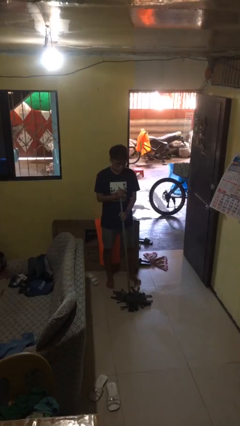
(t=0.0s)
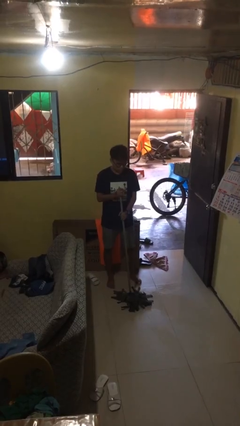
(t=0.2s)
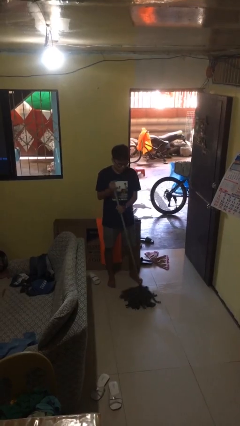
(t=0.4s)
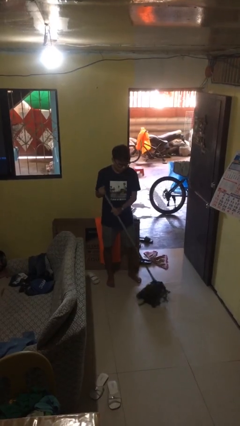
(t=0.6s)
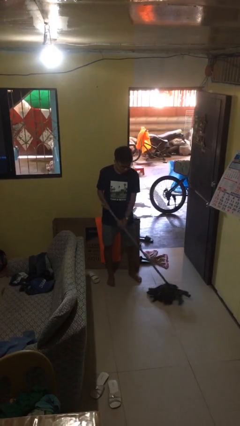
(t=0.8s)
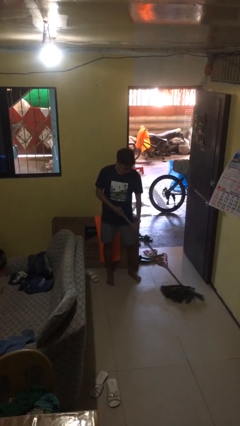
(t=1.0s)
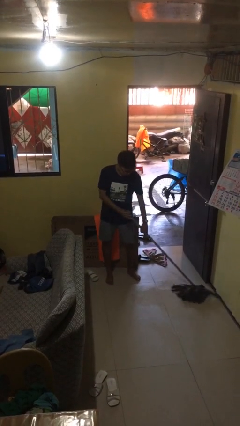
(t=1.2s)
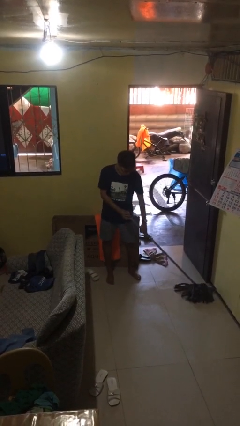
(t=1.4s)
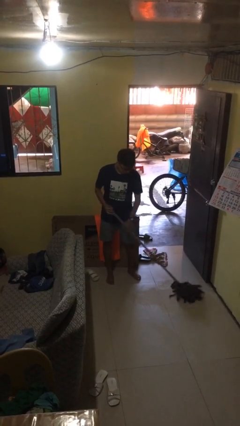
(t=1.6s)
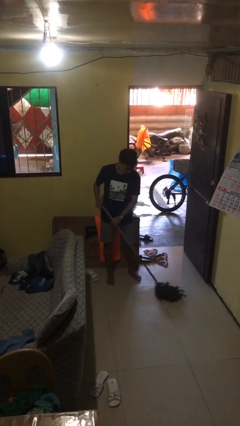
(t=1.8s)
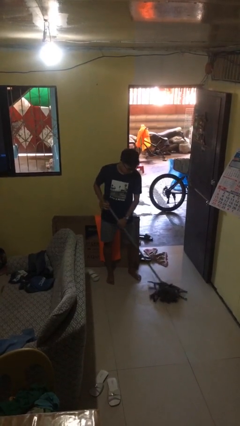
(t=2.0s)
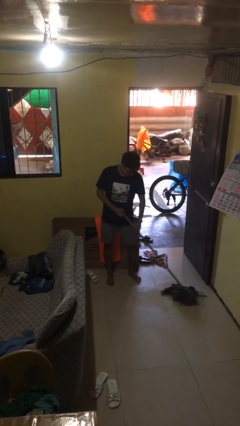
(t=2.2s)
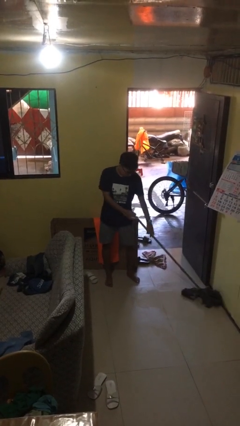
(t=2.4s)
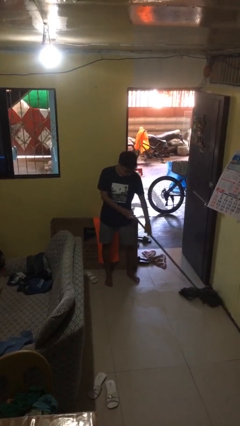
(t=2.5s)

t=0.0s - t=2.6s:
person mops

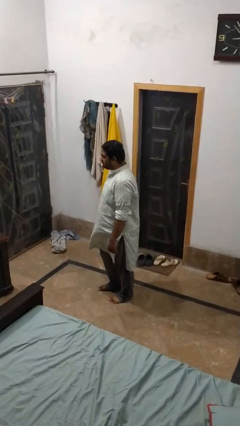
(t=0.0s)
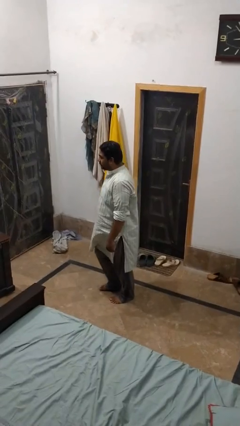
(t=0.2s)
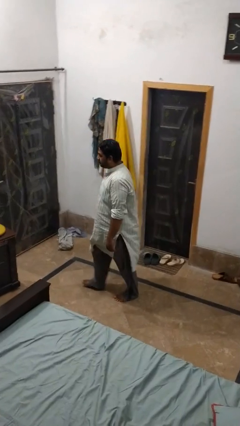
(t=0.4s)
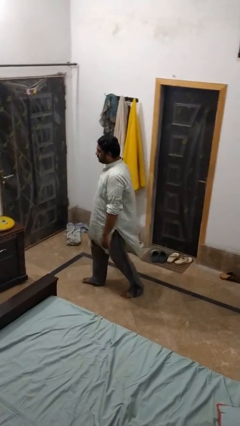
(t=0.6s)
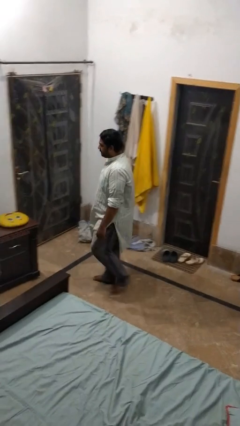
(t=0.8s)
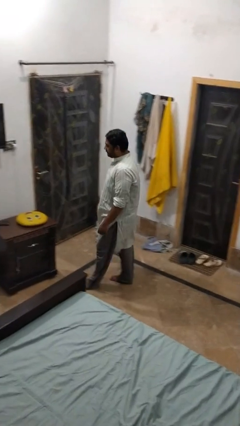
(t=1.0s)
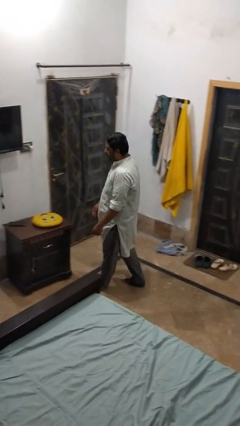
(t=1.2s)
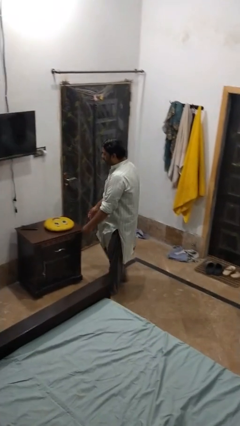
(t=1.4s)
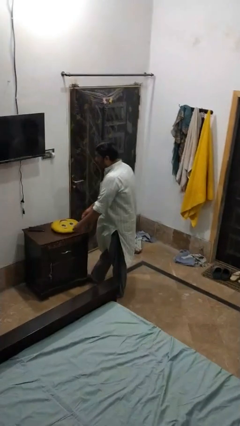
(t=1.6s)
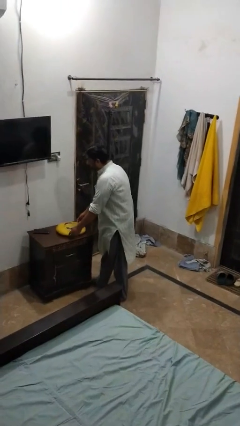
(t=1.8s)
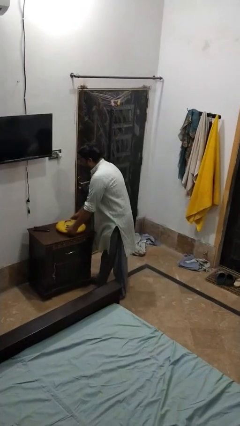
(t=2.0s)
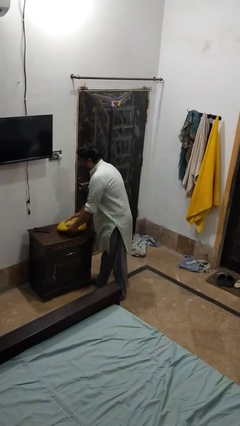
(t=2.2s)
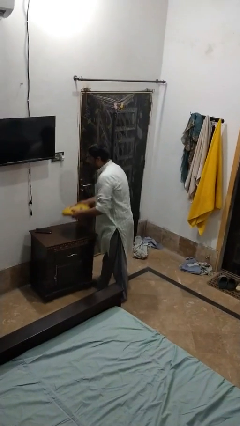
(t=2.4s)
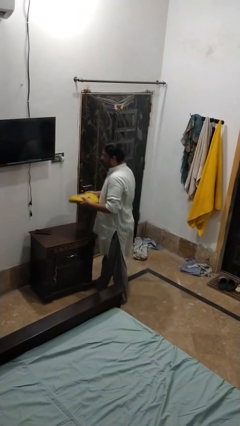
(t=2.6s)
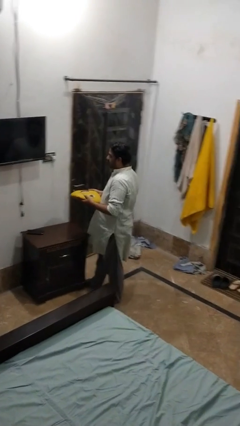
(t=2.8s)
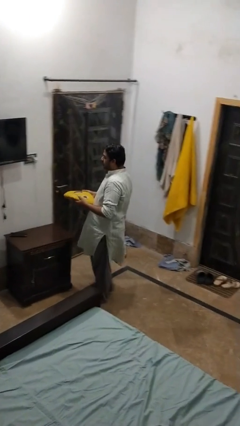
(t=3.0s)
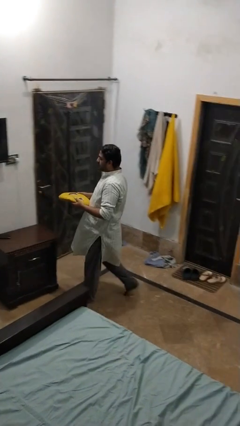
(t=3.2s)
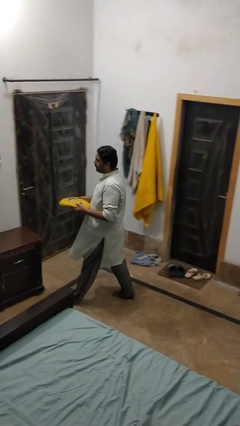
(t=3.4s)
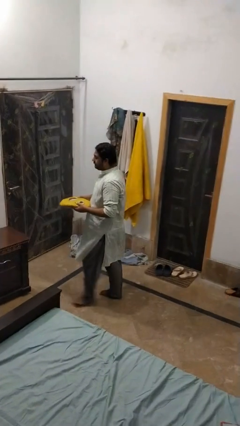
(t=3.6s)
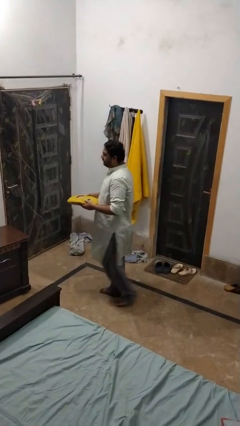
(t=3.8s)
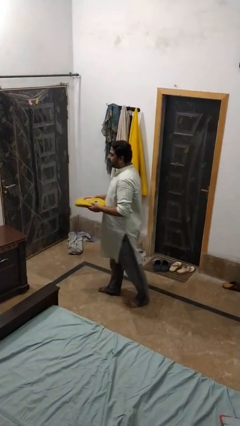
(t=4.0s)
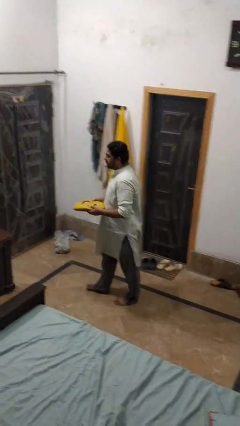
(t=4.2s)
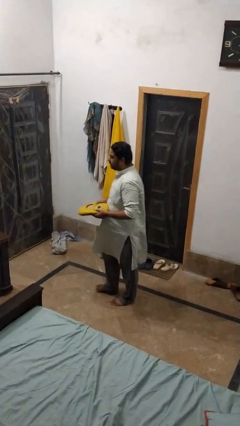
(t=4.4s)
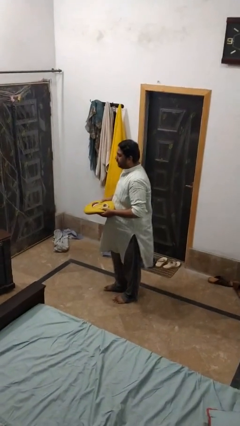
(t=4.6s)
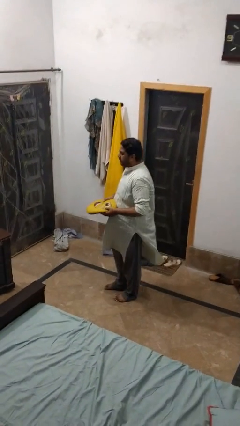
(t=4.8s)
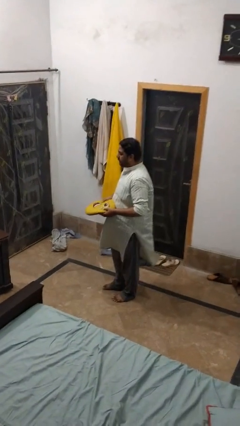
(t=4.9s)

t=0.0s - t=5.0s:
person picks up object from table

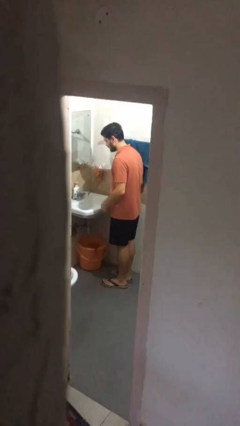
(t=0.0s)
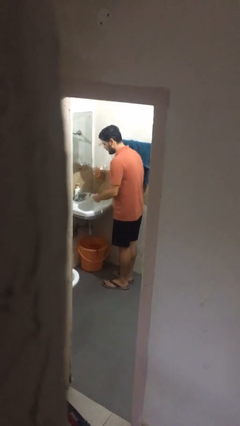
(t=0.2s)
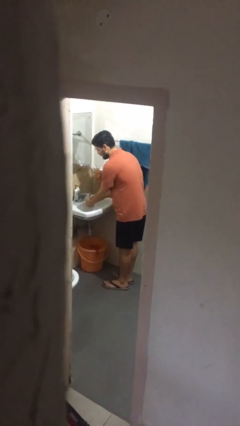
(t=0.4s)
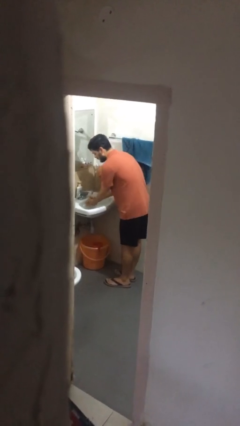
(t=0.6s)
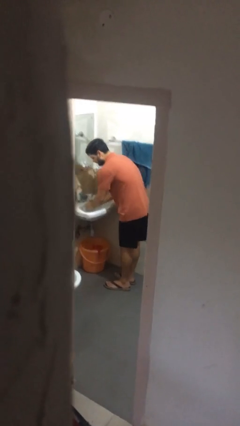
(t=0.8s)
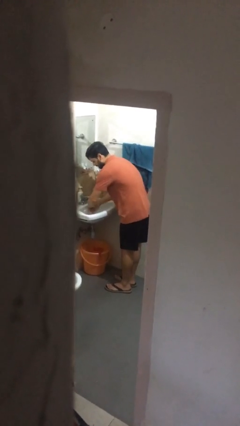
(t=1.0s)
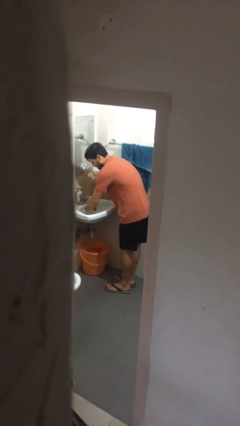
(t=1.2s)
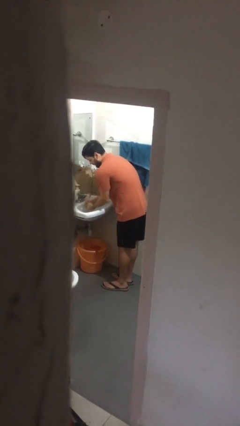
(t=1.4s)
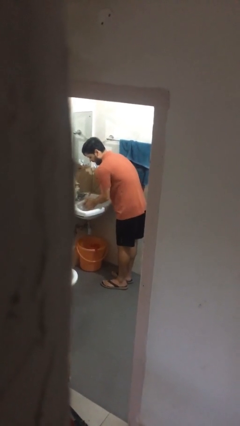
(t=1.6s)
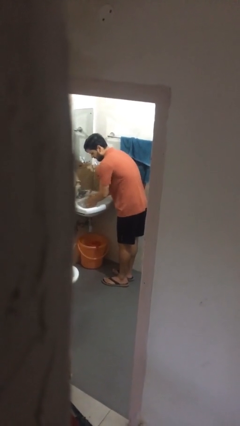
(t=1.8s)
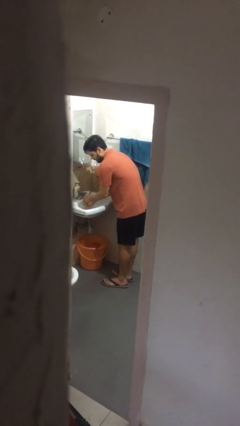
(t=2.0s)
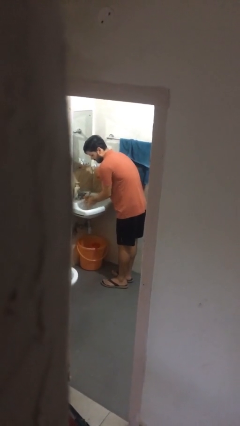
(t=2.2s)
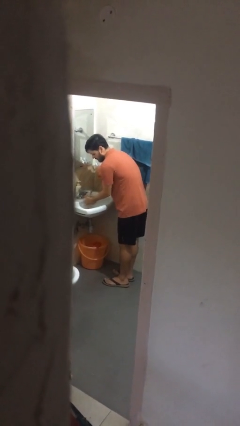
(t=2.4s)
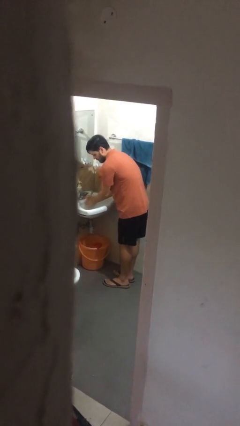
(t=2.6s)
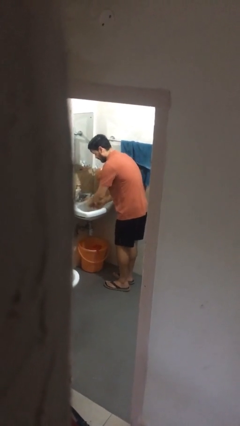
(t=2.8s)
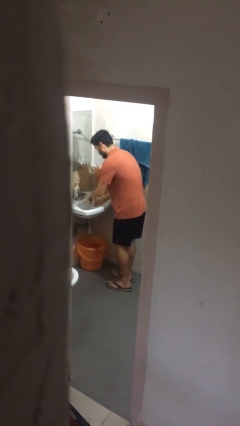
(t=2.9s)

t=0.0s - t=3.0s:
person washes hands

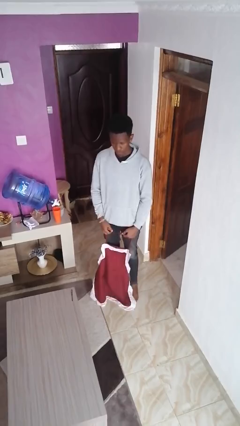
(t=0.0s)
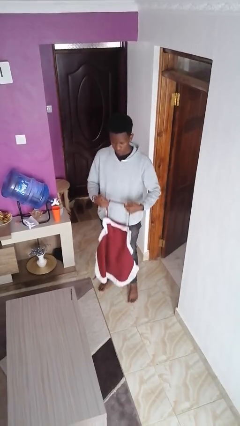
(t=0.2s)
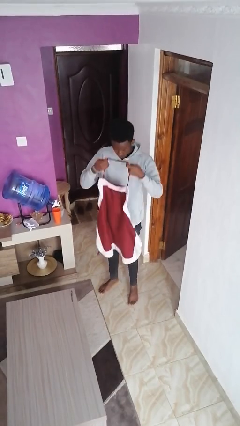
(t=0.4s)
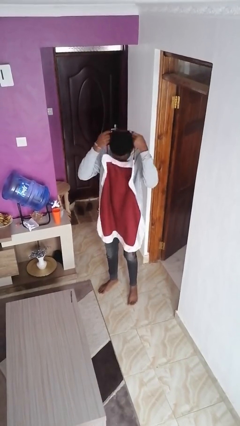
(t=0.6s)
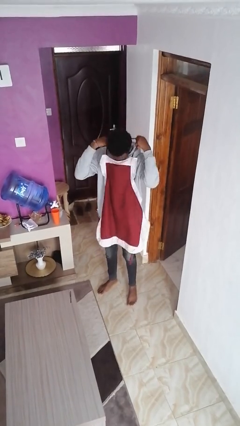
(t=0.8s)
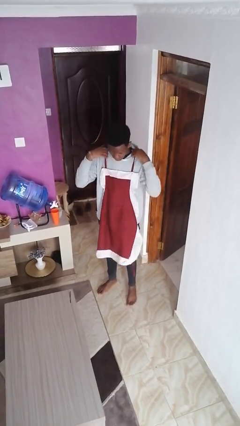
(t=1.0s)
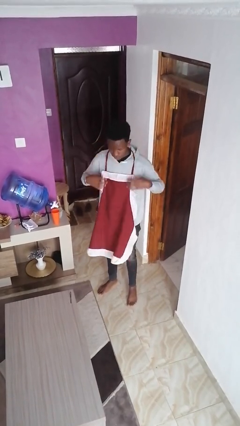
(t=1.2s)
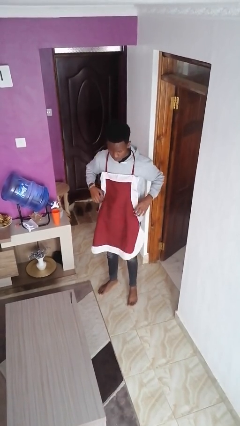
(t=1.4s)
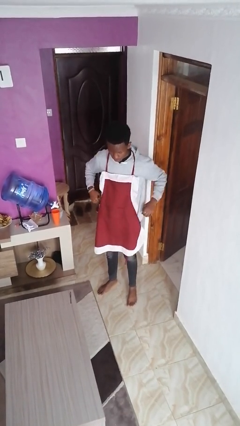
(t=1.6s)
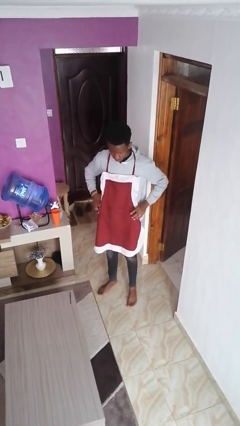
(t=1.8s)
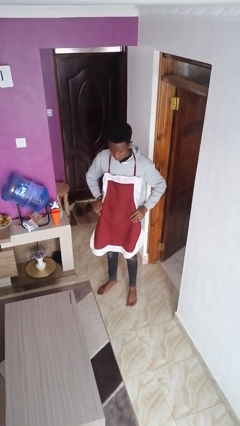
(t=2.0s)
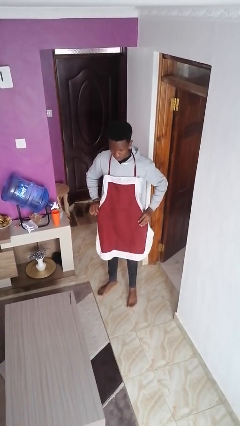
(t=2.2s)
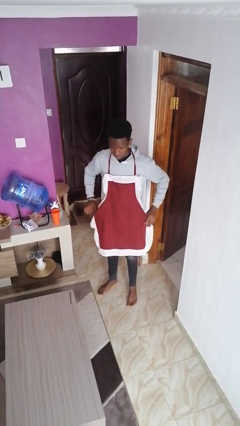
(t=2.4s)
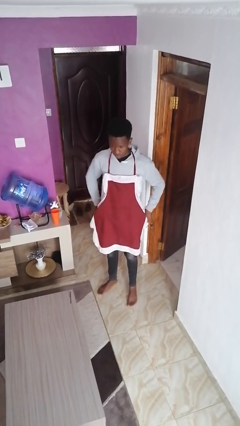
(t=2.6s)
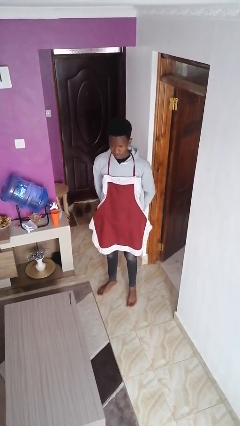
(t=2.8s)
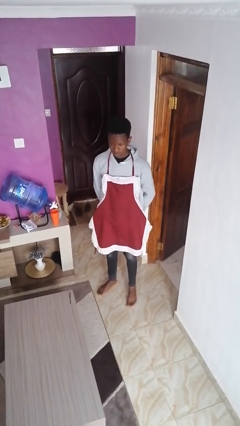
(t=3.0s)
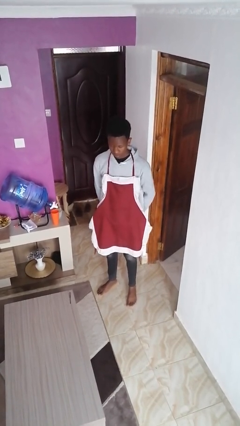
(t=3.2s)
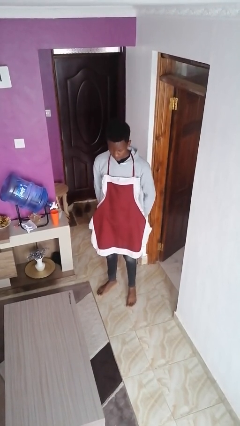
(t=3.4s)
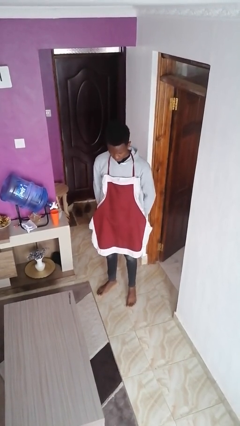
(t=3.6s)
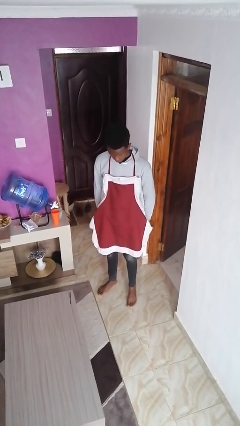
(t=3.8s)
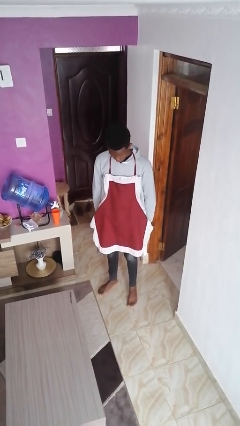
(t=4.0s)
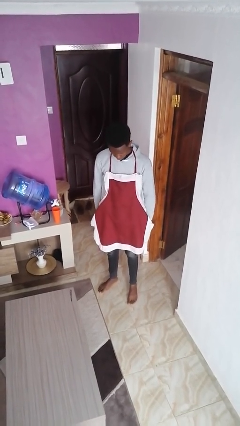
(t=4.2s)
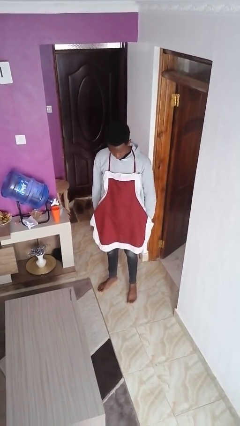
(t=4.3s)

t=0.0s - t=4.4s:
person puts on apron

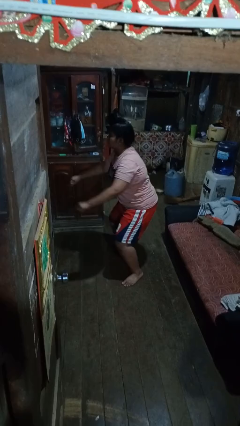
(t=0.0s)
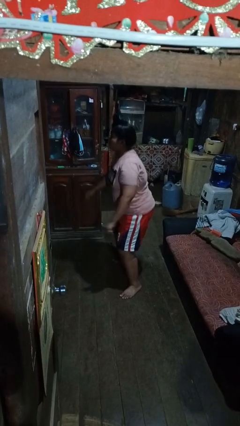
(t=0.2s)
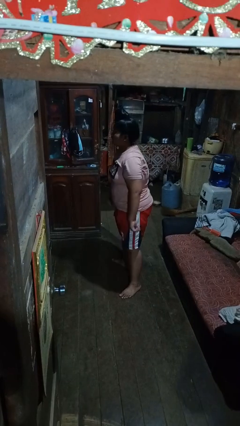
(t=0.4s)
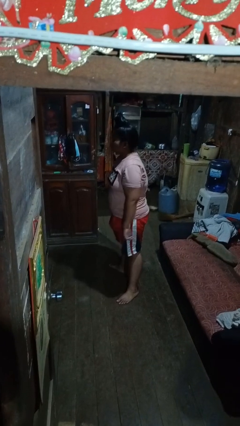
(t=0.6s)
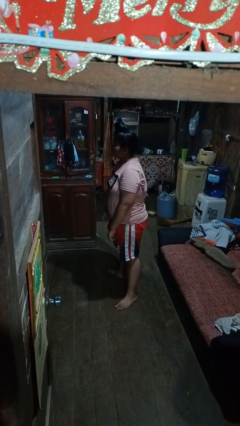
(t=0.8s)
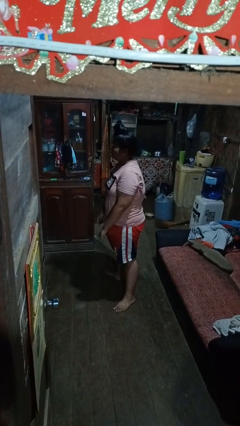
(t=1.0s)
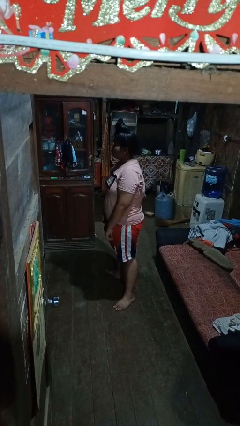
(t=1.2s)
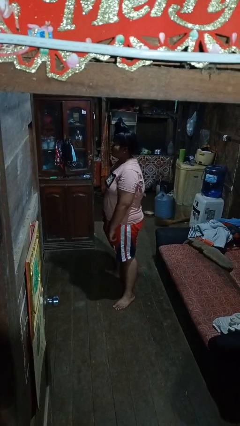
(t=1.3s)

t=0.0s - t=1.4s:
person stands up

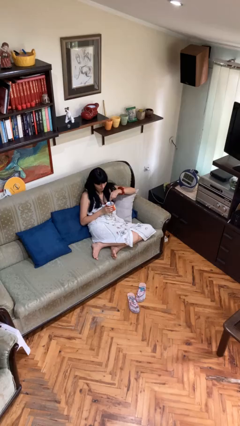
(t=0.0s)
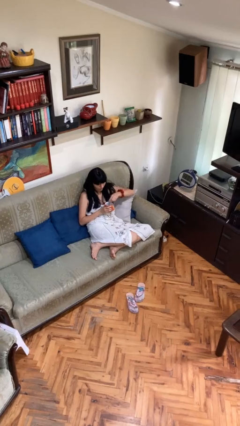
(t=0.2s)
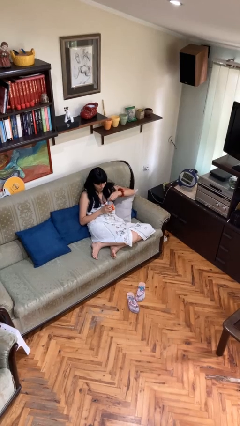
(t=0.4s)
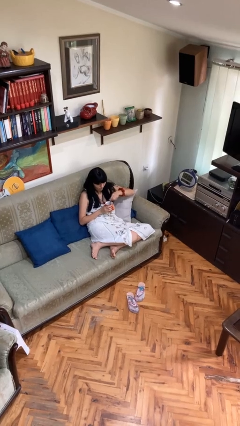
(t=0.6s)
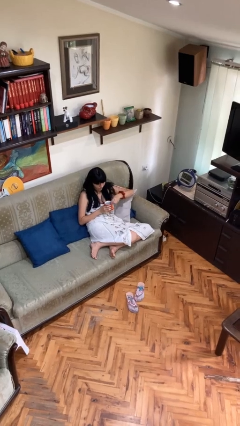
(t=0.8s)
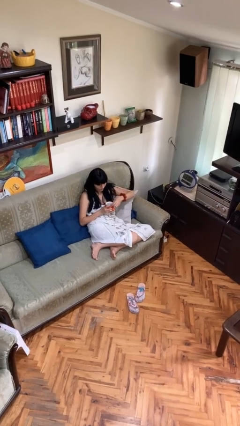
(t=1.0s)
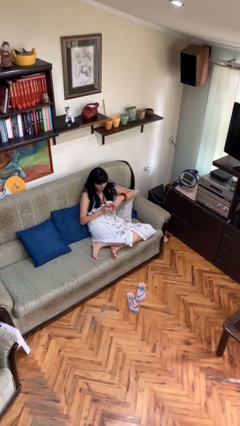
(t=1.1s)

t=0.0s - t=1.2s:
person stirs mug
